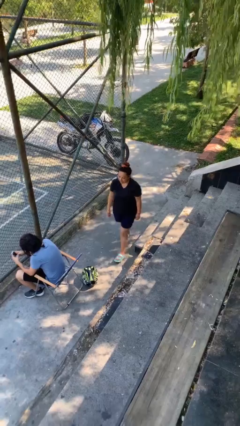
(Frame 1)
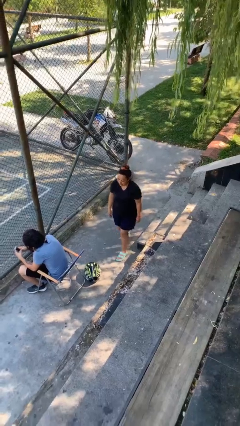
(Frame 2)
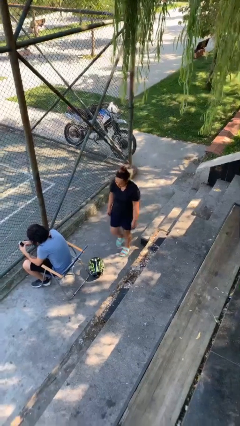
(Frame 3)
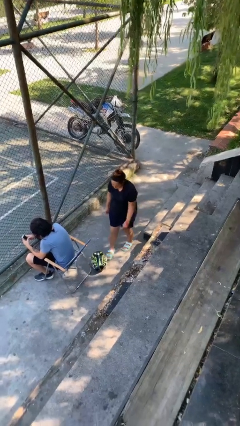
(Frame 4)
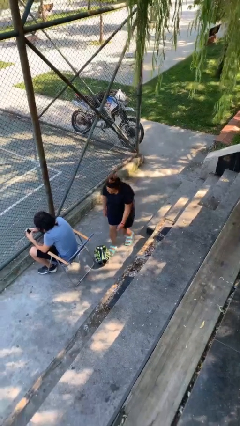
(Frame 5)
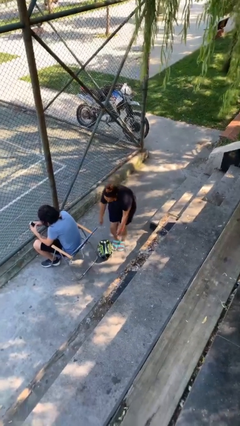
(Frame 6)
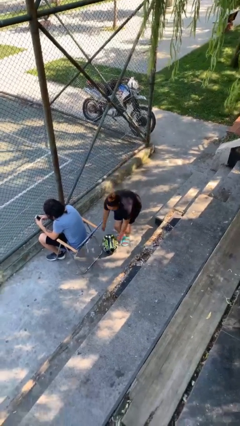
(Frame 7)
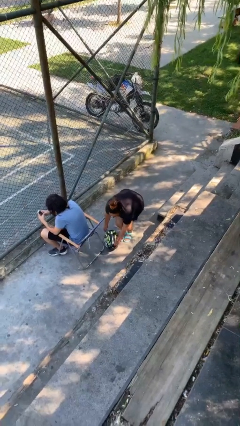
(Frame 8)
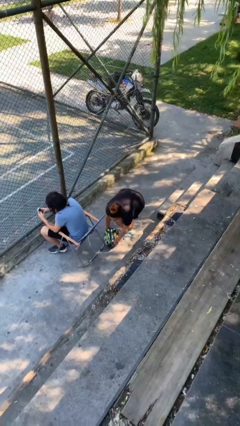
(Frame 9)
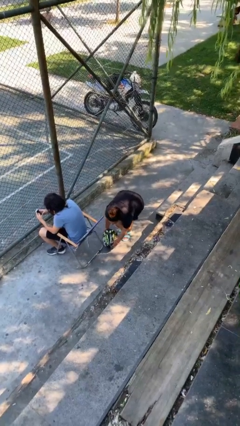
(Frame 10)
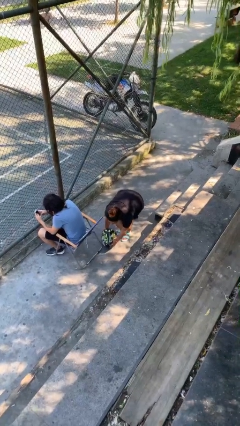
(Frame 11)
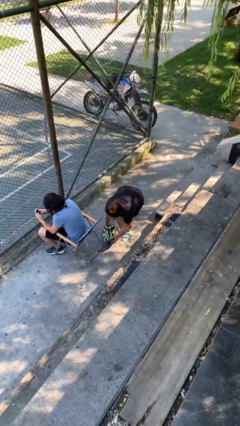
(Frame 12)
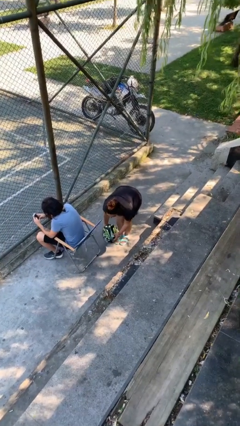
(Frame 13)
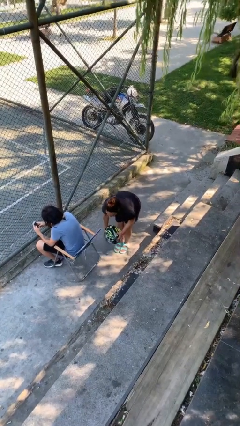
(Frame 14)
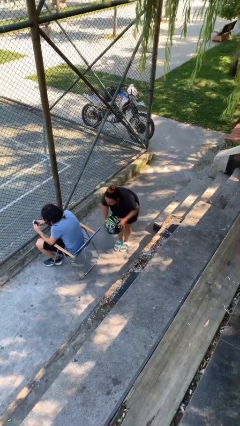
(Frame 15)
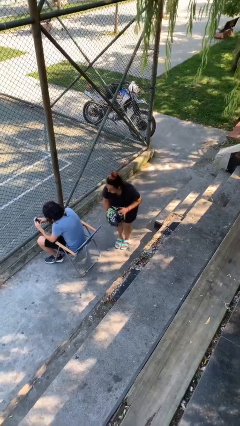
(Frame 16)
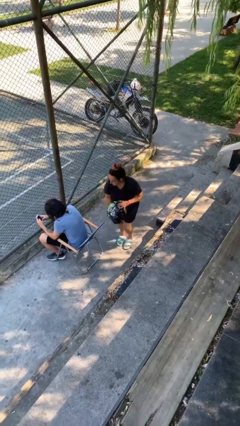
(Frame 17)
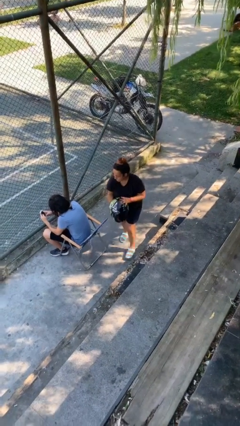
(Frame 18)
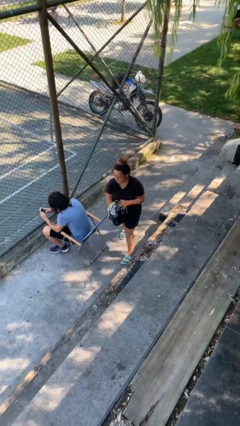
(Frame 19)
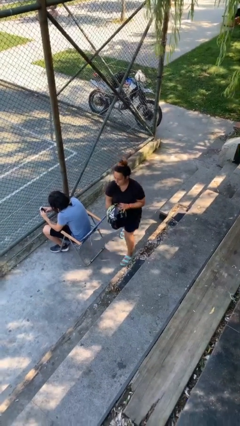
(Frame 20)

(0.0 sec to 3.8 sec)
person steals object from person

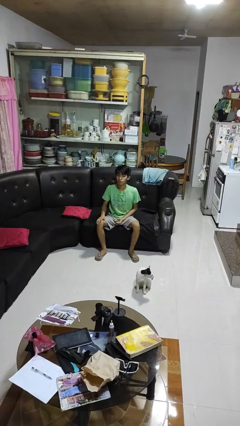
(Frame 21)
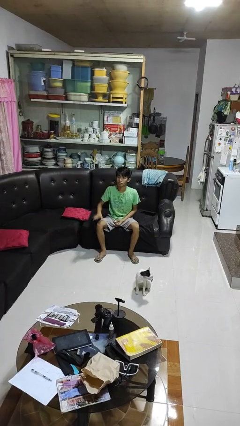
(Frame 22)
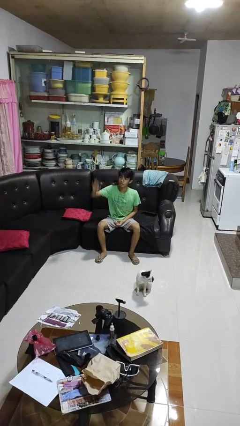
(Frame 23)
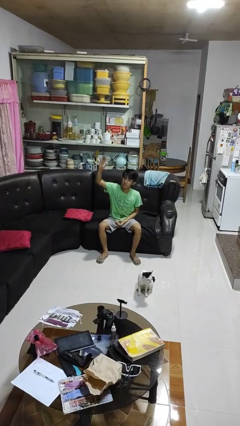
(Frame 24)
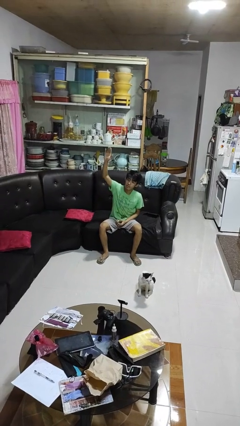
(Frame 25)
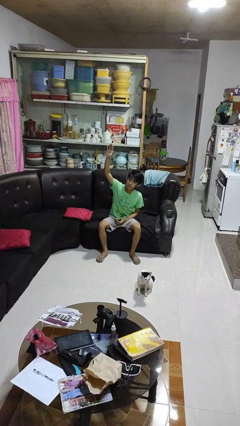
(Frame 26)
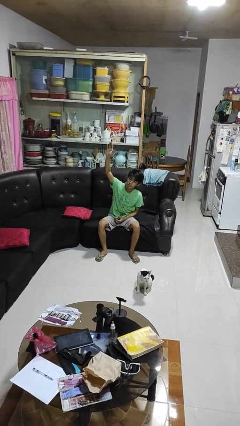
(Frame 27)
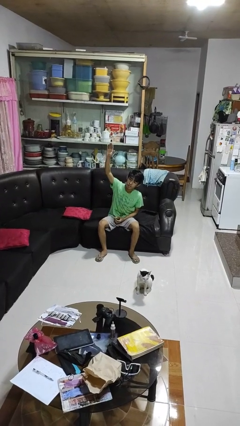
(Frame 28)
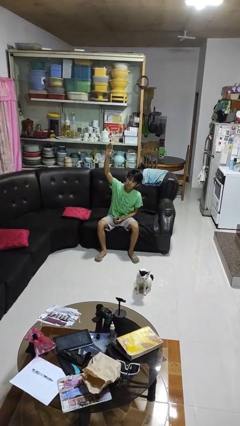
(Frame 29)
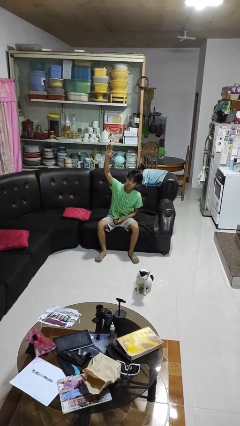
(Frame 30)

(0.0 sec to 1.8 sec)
person gestures raise hand

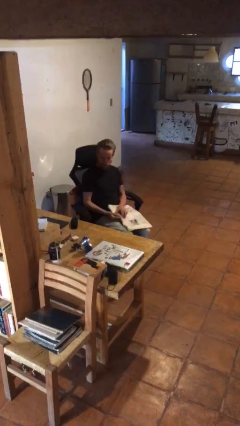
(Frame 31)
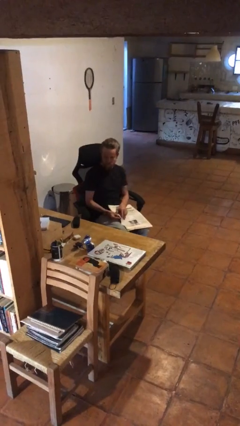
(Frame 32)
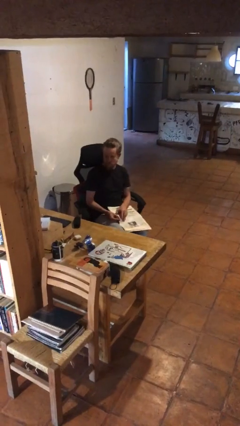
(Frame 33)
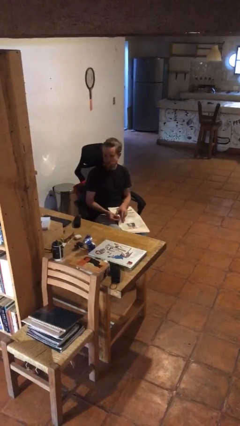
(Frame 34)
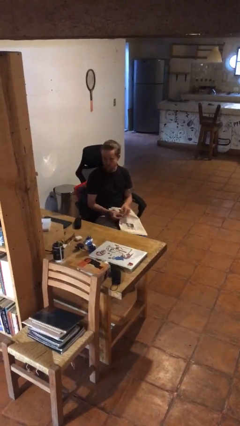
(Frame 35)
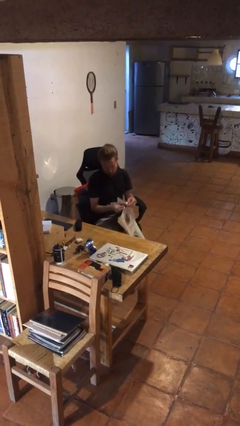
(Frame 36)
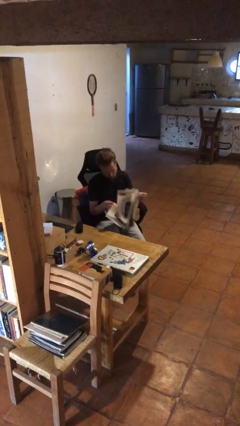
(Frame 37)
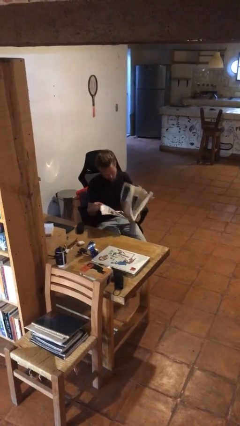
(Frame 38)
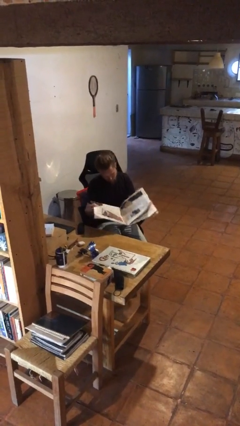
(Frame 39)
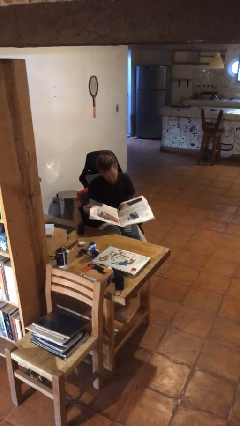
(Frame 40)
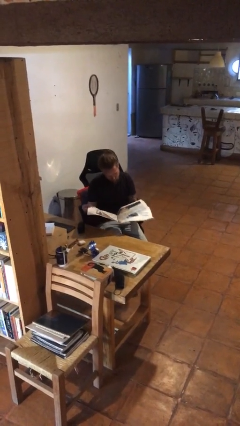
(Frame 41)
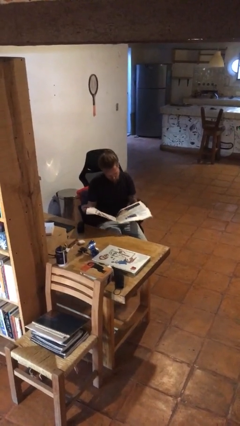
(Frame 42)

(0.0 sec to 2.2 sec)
person reads newspaper

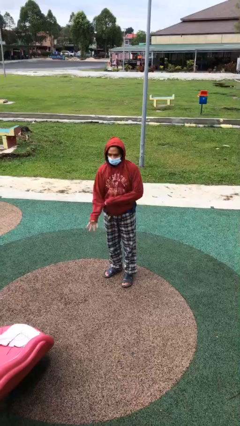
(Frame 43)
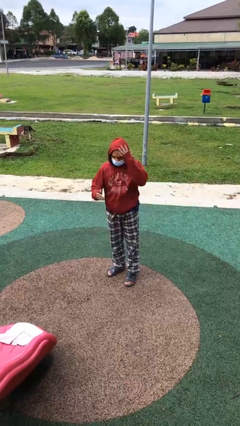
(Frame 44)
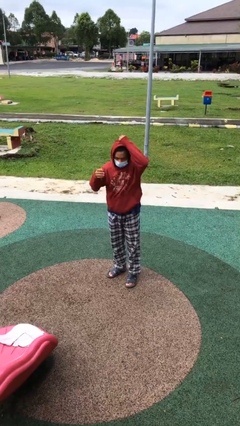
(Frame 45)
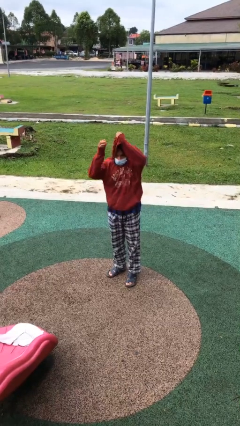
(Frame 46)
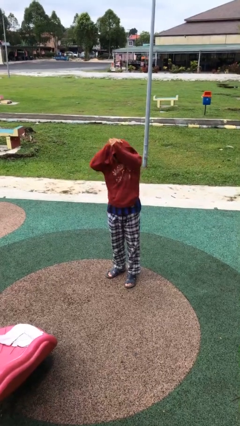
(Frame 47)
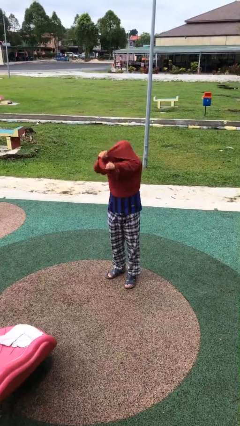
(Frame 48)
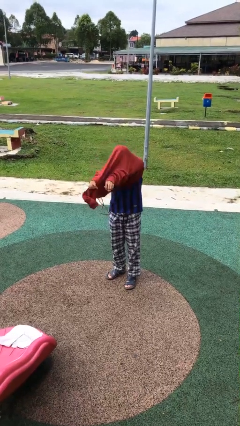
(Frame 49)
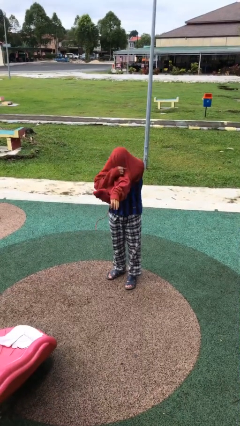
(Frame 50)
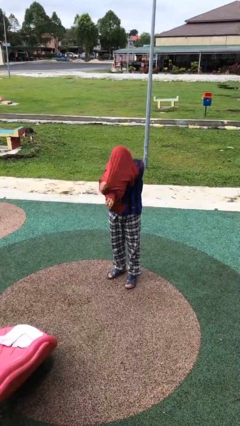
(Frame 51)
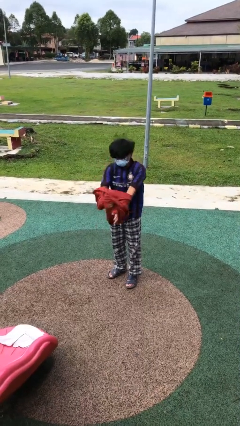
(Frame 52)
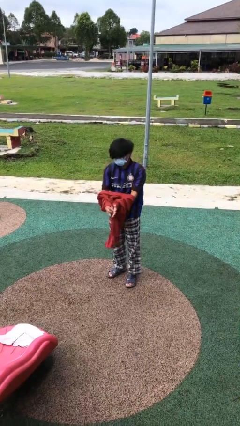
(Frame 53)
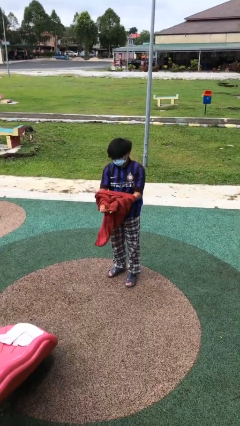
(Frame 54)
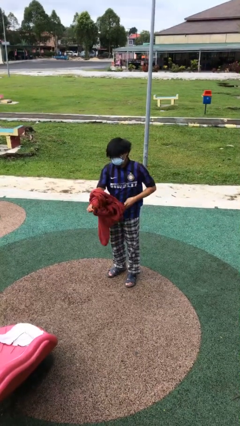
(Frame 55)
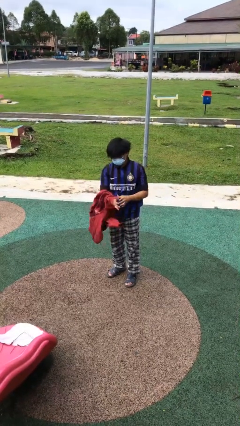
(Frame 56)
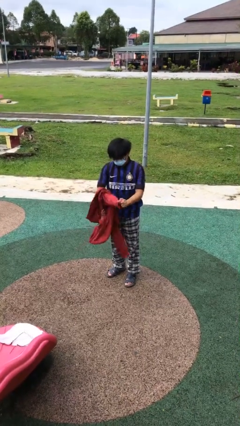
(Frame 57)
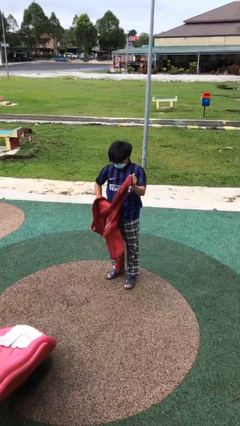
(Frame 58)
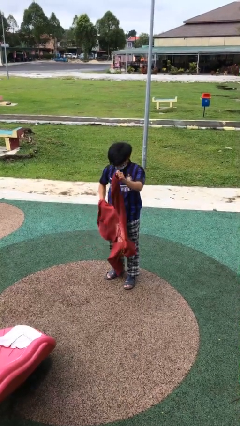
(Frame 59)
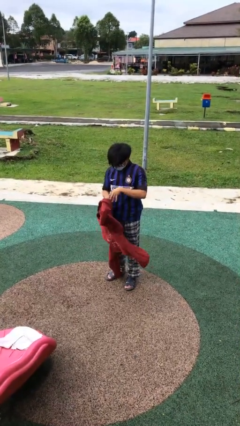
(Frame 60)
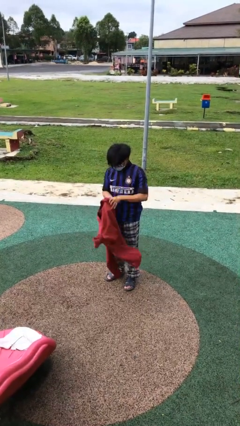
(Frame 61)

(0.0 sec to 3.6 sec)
person takes off hoodie

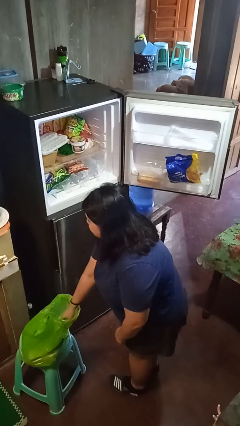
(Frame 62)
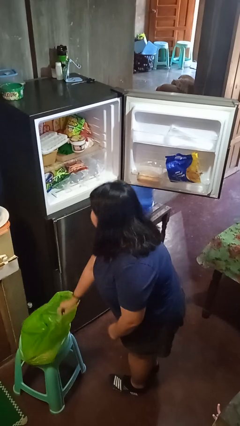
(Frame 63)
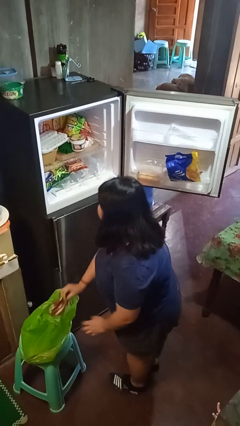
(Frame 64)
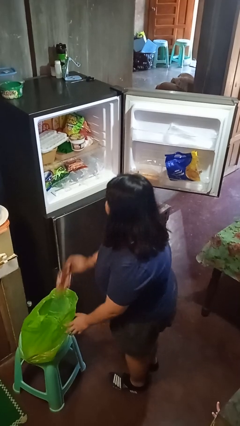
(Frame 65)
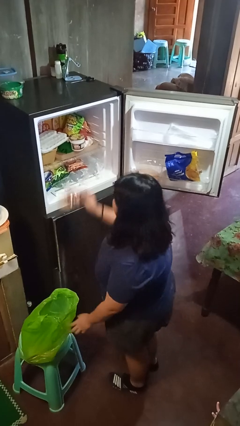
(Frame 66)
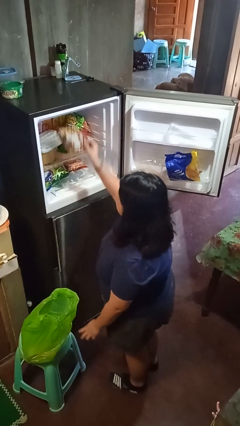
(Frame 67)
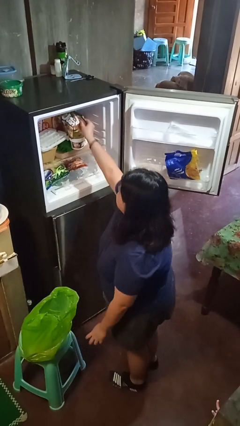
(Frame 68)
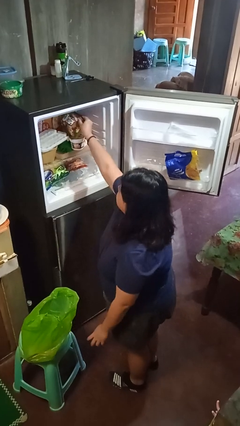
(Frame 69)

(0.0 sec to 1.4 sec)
person loads groceries into refrigerator

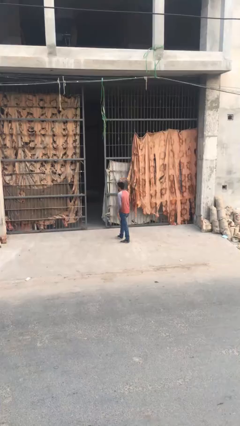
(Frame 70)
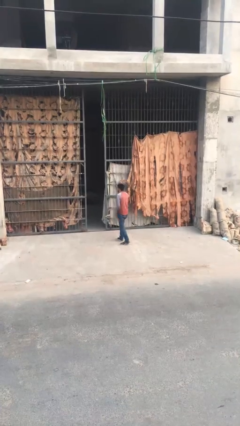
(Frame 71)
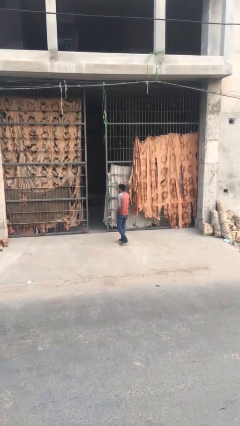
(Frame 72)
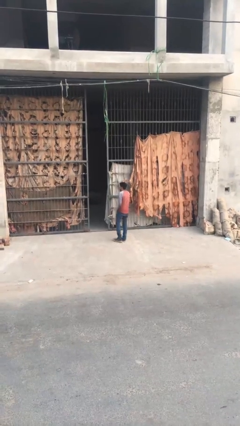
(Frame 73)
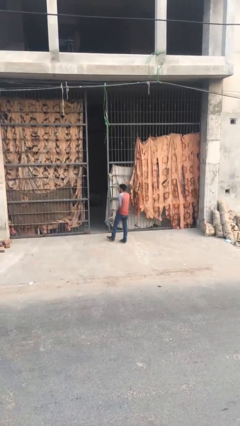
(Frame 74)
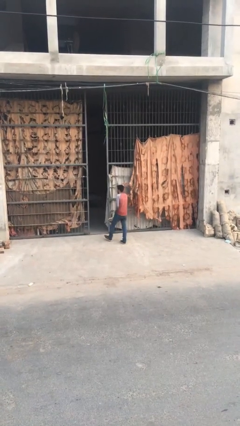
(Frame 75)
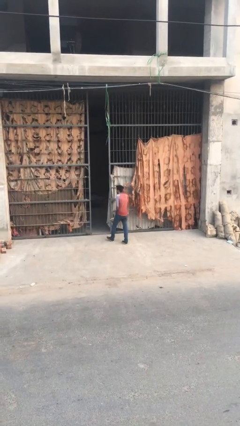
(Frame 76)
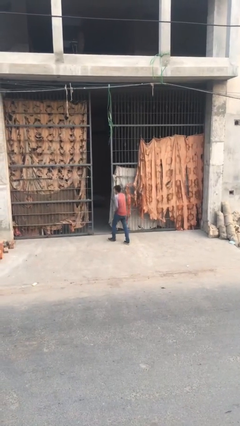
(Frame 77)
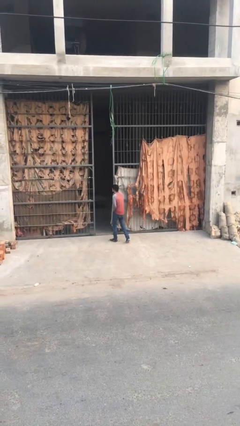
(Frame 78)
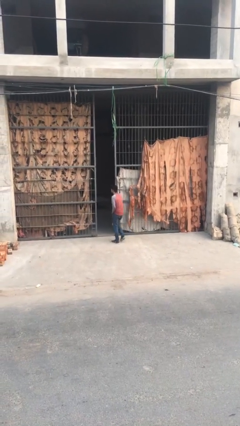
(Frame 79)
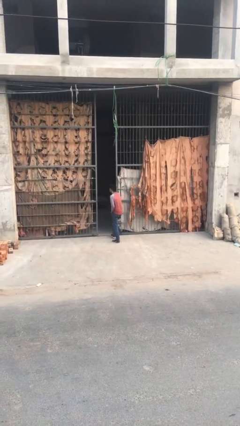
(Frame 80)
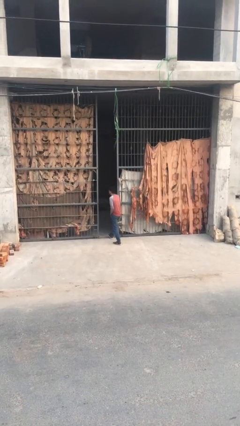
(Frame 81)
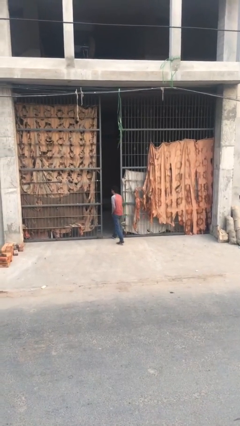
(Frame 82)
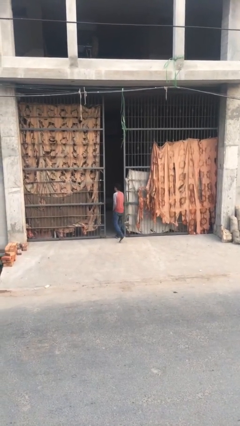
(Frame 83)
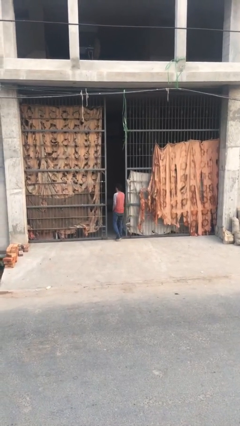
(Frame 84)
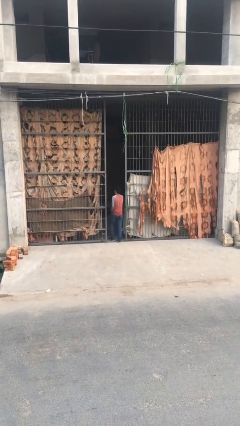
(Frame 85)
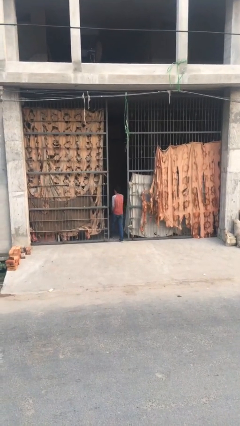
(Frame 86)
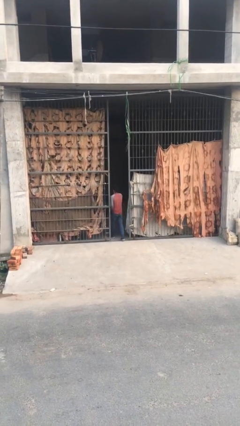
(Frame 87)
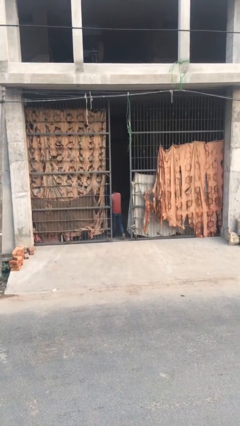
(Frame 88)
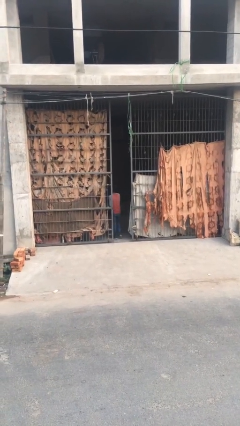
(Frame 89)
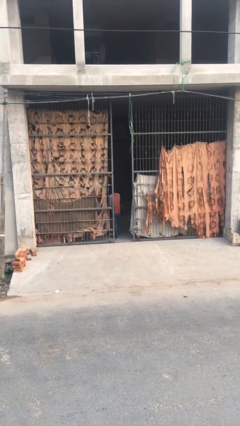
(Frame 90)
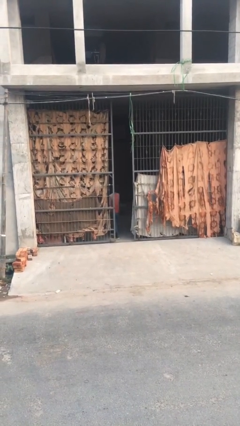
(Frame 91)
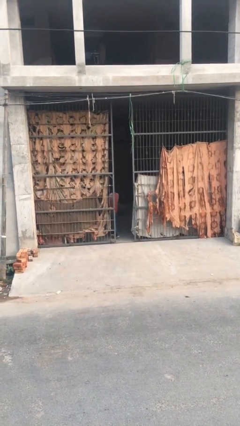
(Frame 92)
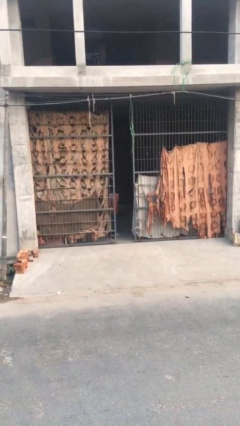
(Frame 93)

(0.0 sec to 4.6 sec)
person exits scene through structure
